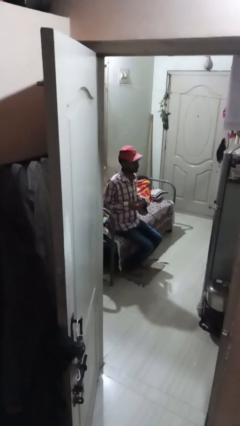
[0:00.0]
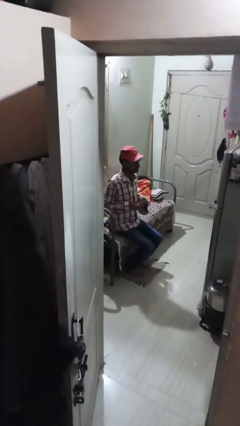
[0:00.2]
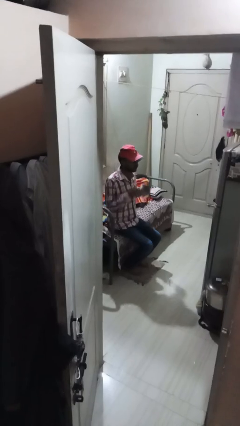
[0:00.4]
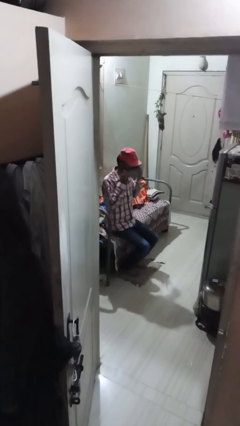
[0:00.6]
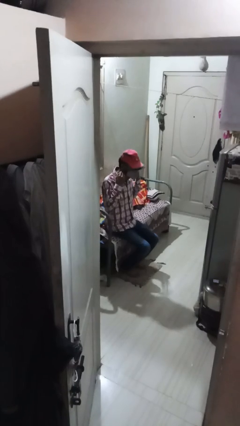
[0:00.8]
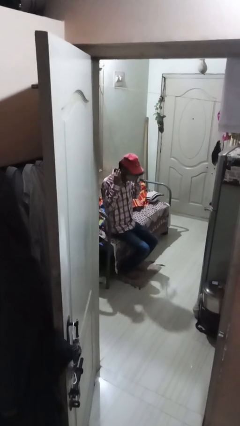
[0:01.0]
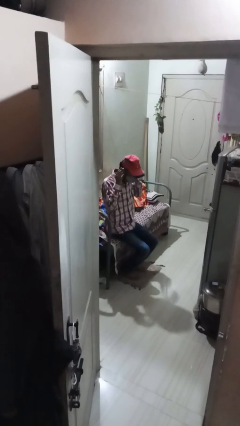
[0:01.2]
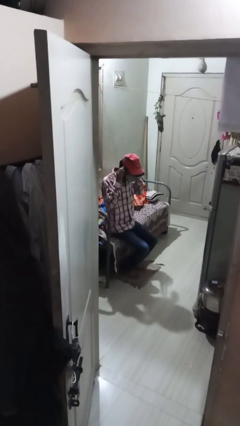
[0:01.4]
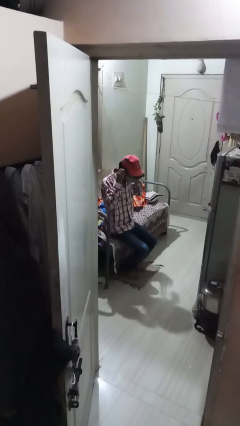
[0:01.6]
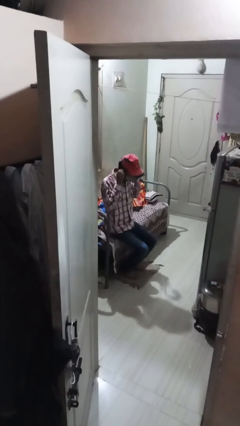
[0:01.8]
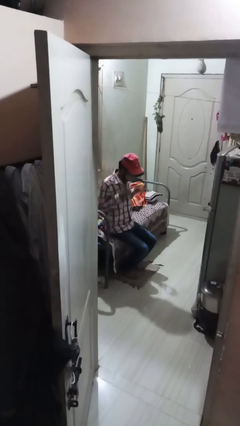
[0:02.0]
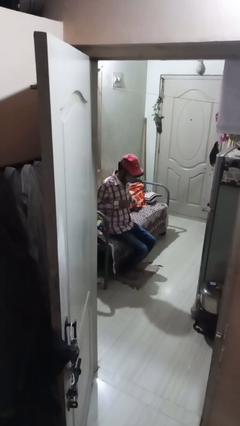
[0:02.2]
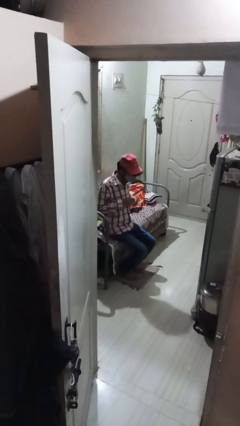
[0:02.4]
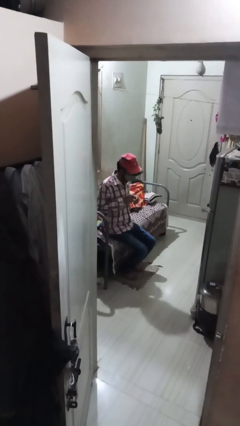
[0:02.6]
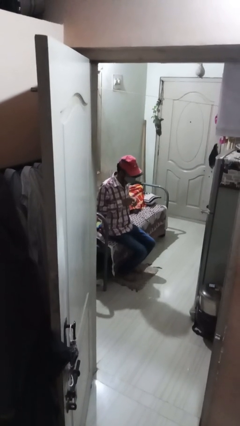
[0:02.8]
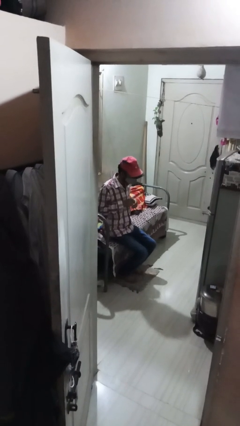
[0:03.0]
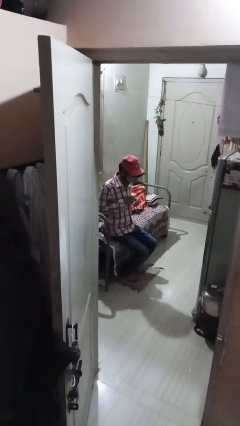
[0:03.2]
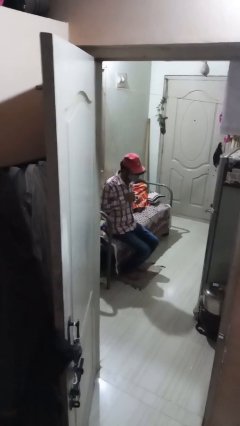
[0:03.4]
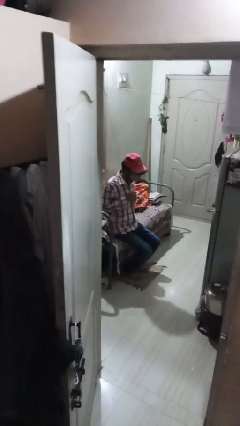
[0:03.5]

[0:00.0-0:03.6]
person puts on facemask

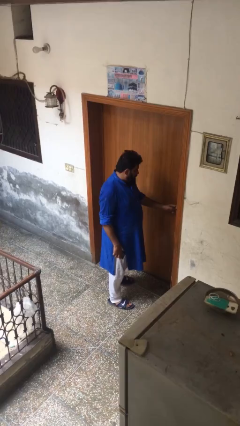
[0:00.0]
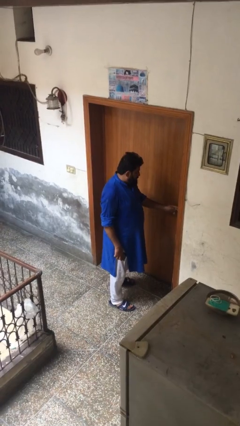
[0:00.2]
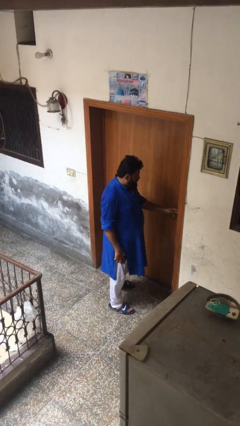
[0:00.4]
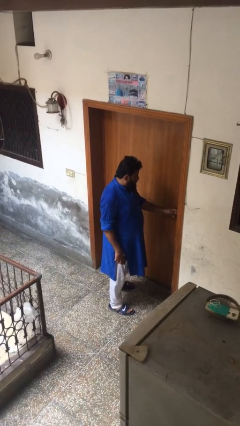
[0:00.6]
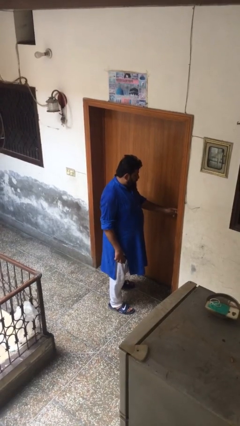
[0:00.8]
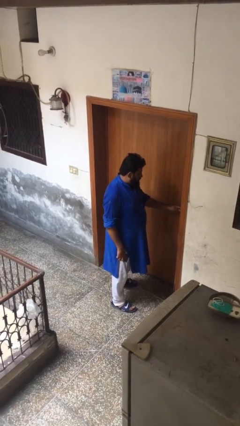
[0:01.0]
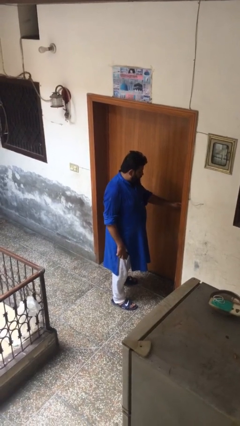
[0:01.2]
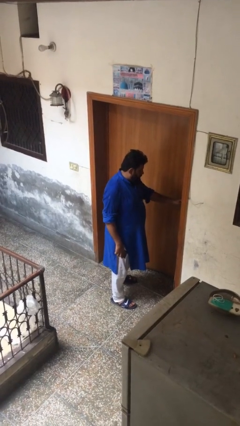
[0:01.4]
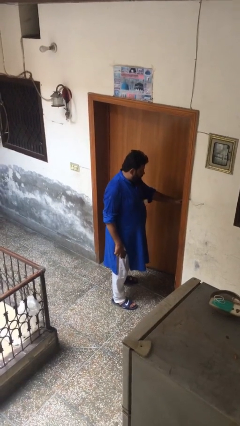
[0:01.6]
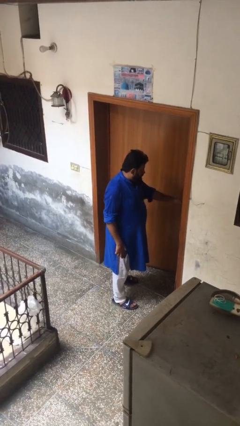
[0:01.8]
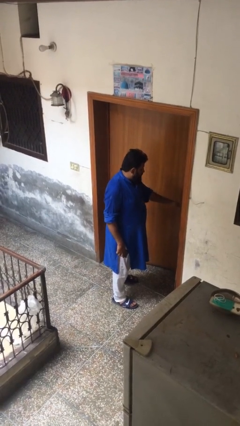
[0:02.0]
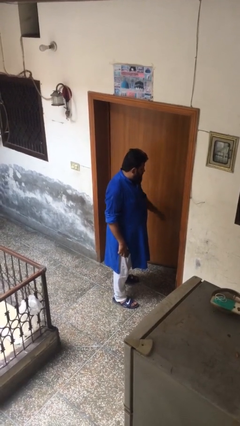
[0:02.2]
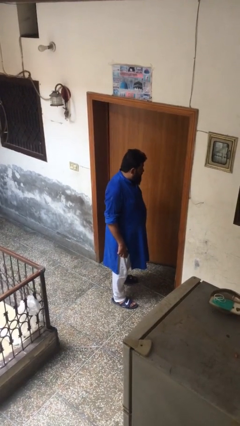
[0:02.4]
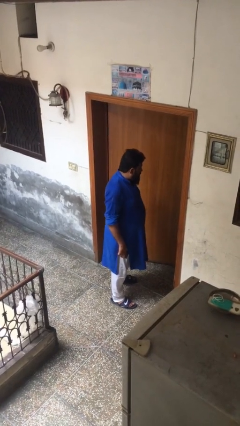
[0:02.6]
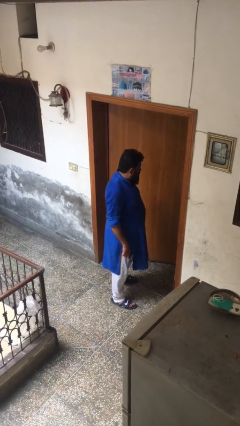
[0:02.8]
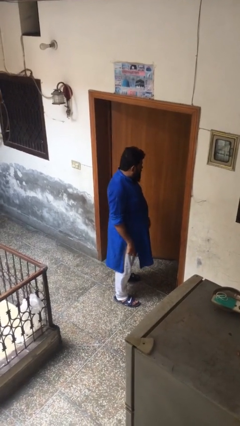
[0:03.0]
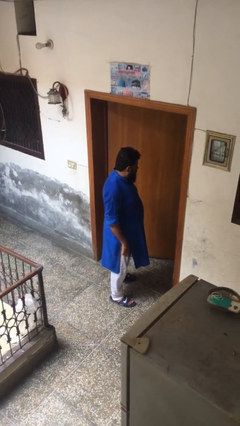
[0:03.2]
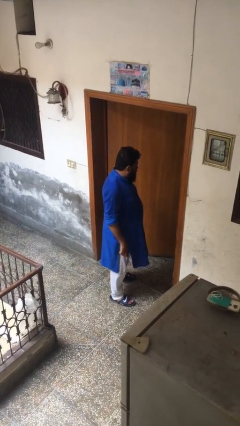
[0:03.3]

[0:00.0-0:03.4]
person opens facility door

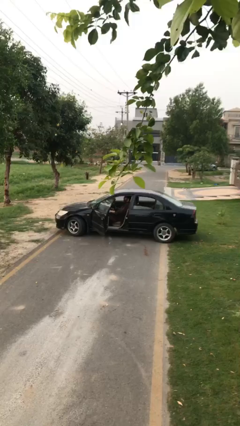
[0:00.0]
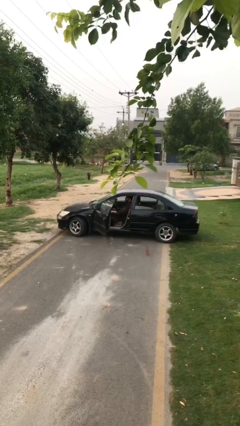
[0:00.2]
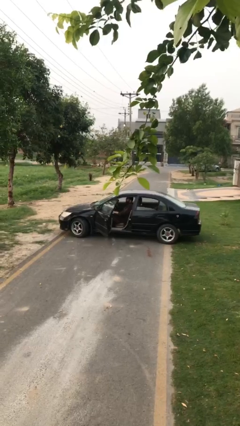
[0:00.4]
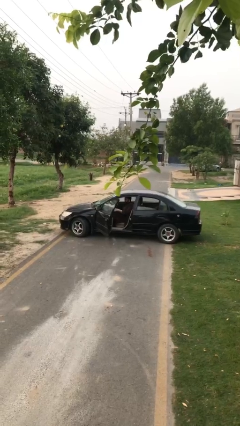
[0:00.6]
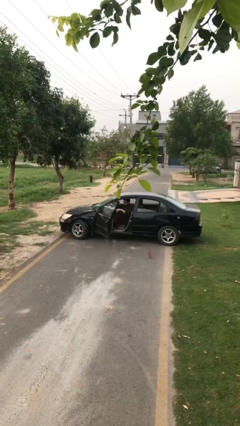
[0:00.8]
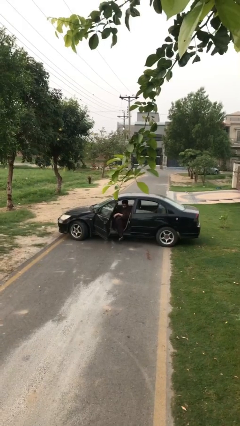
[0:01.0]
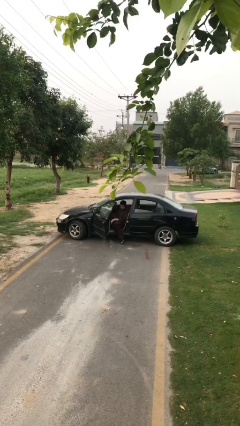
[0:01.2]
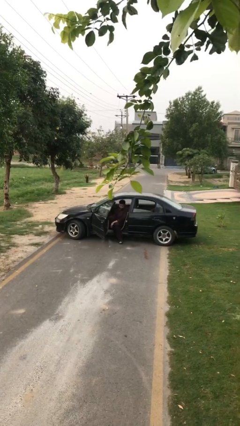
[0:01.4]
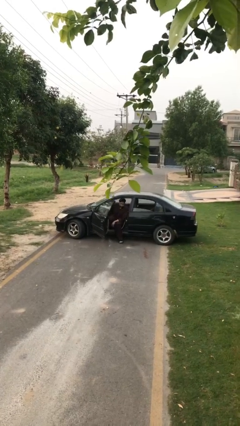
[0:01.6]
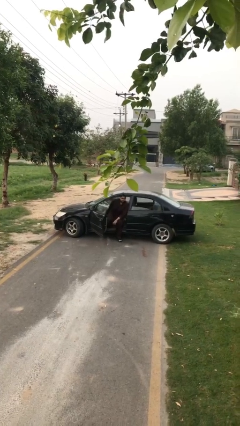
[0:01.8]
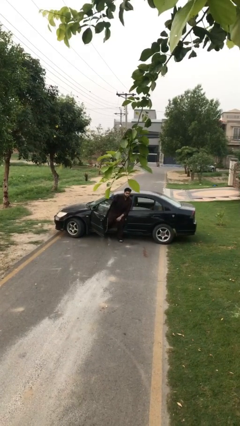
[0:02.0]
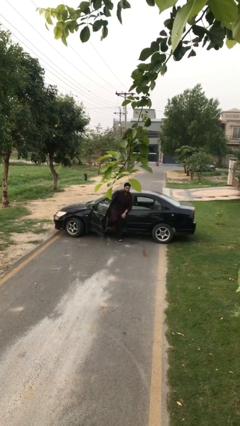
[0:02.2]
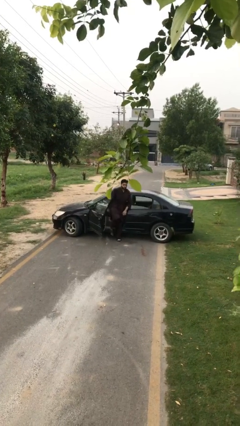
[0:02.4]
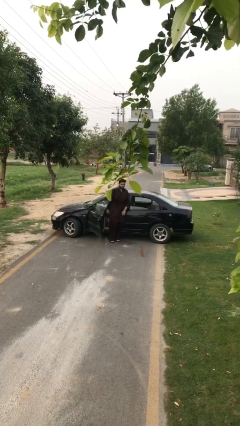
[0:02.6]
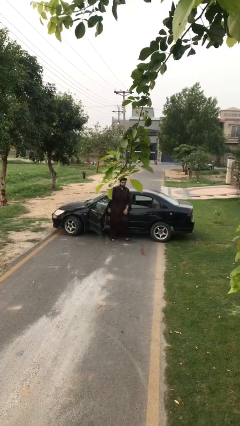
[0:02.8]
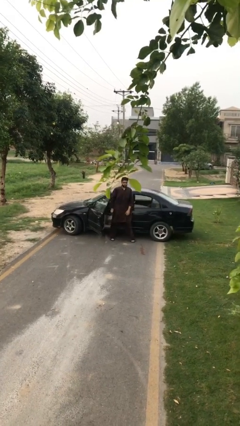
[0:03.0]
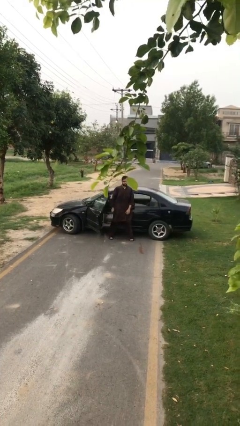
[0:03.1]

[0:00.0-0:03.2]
person exits car

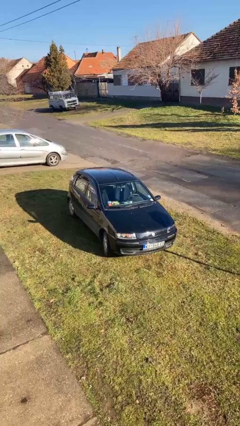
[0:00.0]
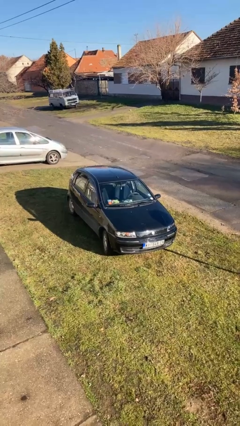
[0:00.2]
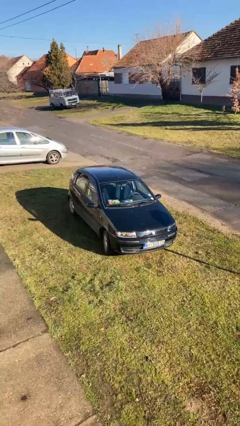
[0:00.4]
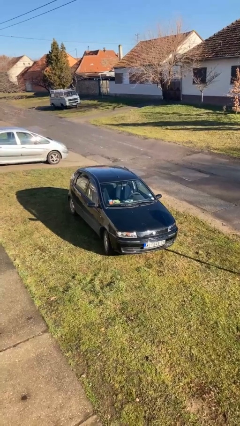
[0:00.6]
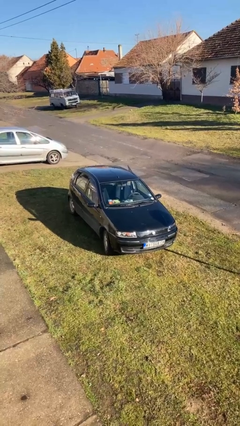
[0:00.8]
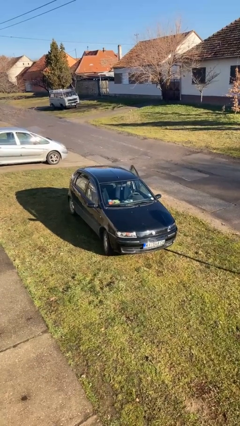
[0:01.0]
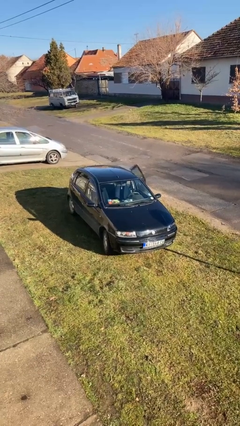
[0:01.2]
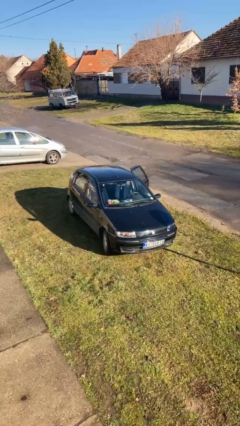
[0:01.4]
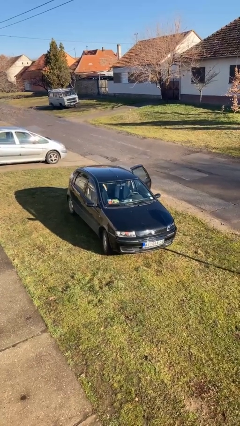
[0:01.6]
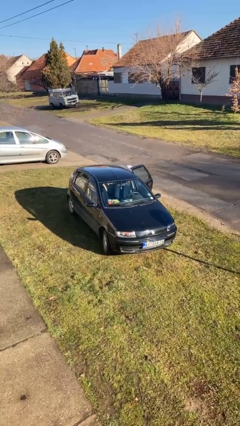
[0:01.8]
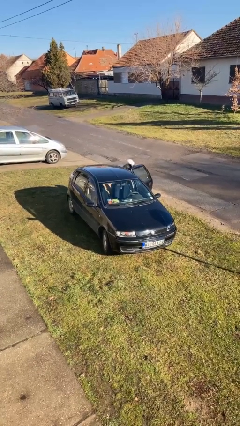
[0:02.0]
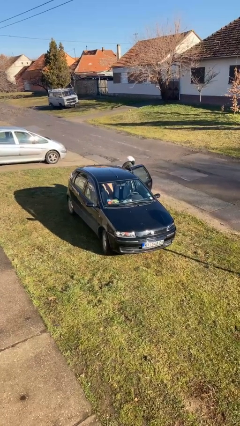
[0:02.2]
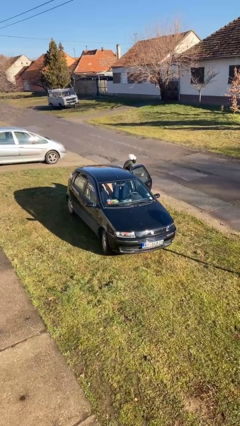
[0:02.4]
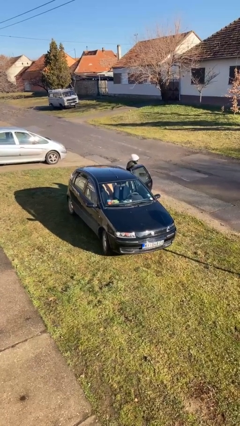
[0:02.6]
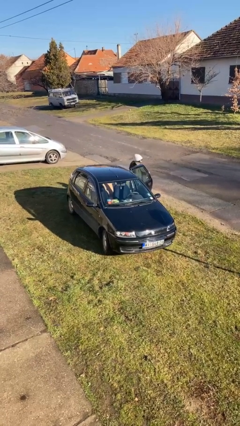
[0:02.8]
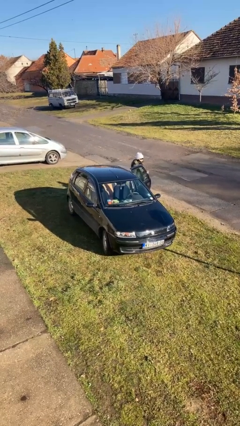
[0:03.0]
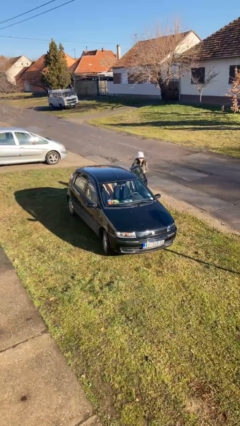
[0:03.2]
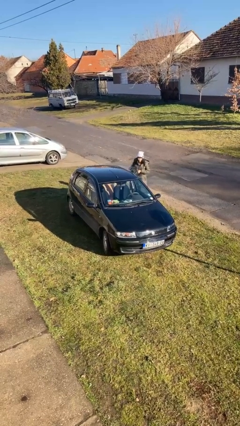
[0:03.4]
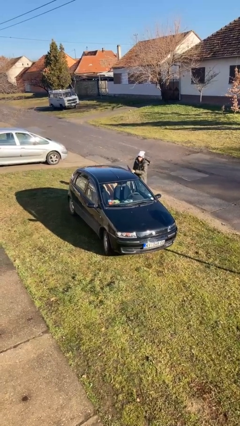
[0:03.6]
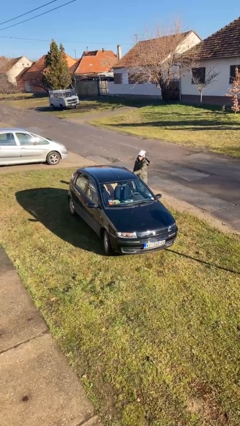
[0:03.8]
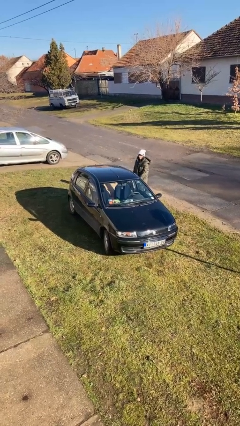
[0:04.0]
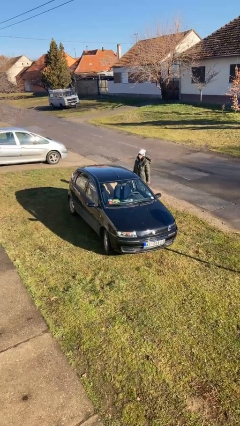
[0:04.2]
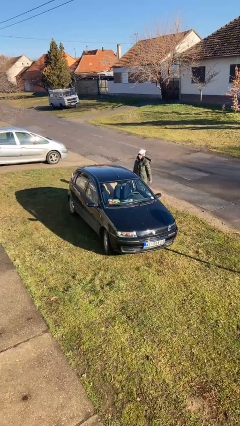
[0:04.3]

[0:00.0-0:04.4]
car drops off person

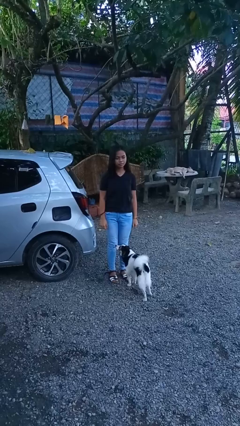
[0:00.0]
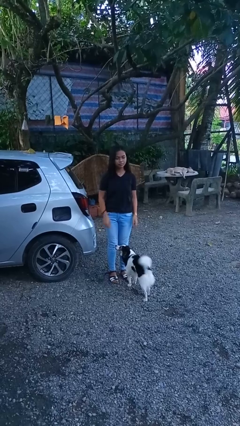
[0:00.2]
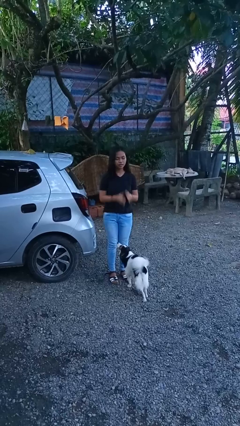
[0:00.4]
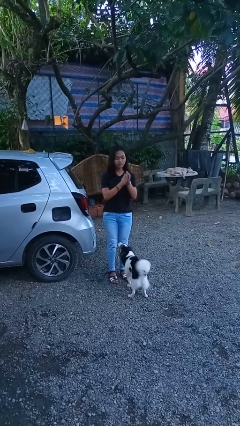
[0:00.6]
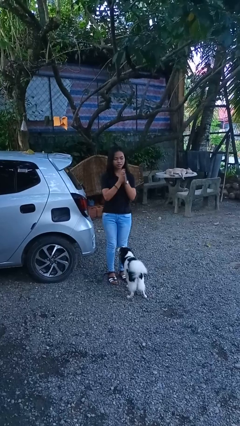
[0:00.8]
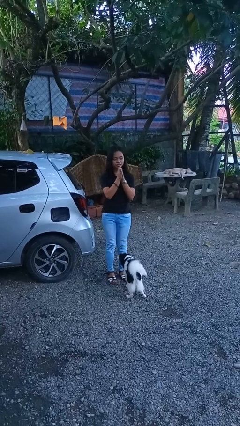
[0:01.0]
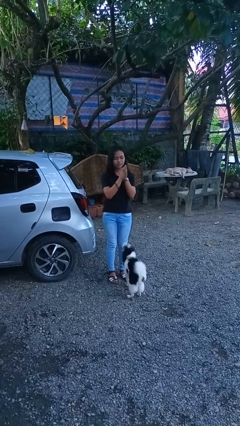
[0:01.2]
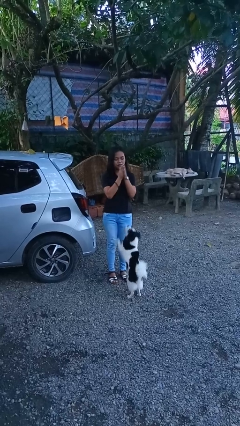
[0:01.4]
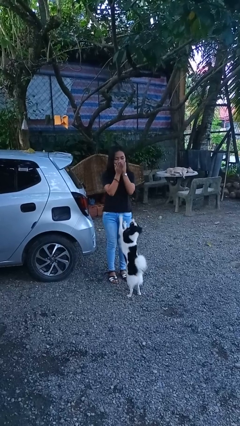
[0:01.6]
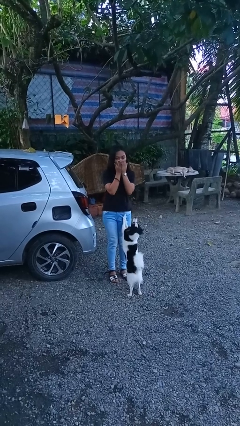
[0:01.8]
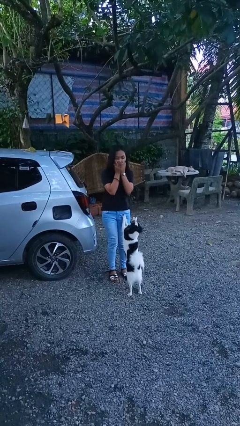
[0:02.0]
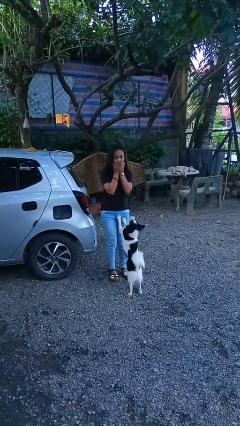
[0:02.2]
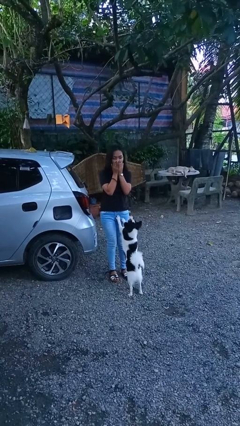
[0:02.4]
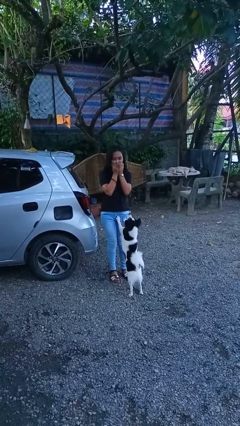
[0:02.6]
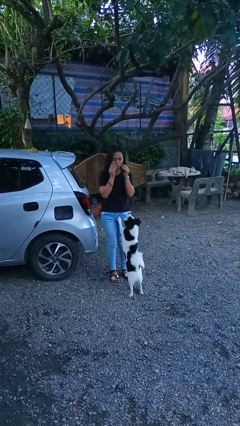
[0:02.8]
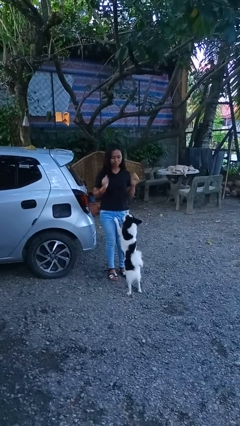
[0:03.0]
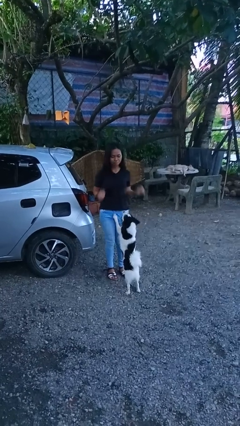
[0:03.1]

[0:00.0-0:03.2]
person blows into hands
